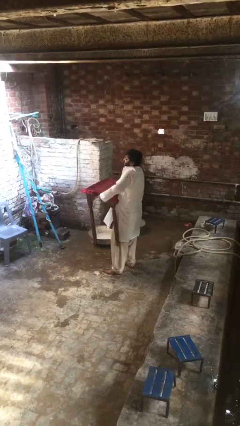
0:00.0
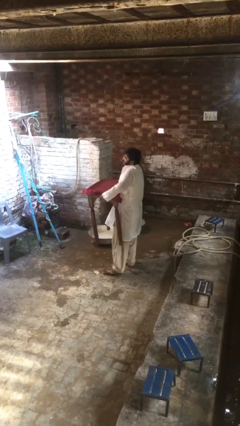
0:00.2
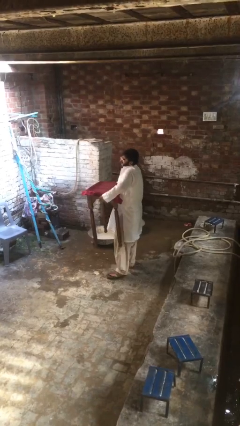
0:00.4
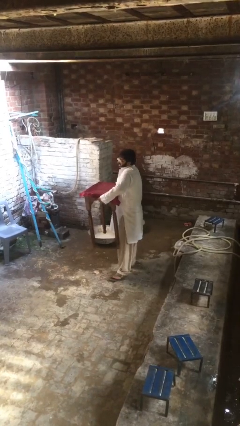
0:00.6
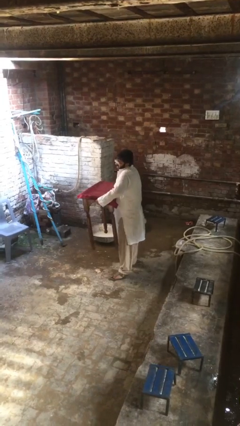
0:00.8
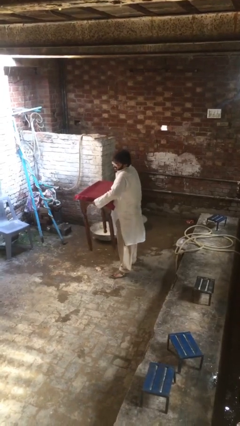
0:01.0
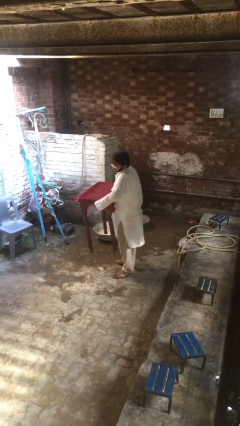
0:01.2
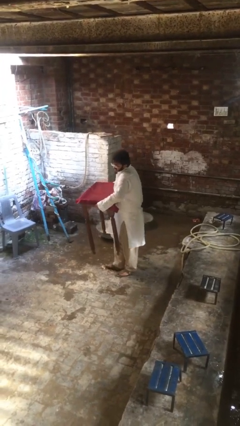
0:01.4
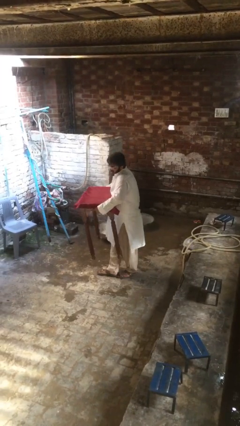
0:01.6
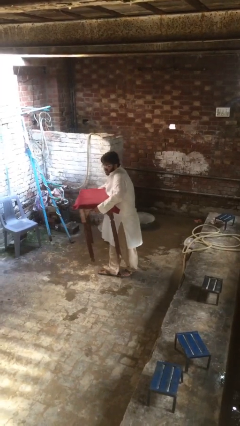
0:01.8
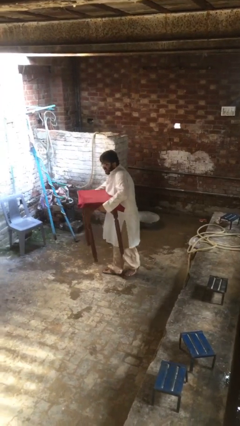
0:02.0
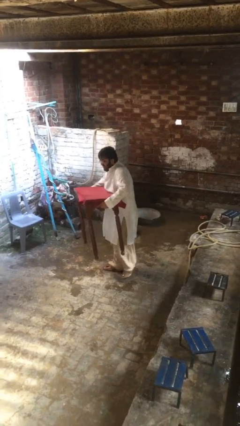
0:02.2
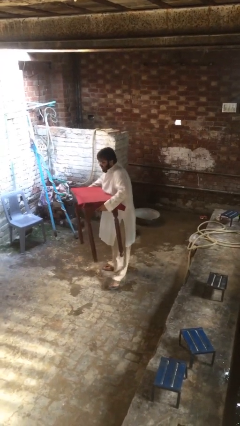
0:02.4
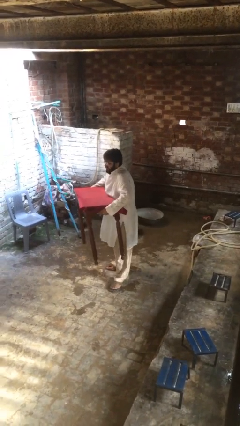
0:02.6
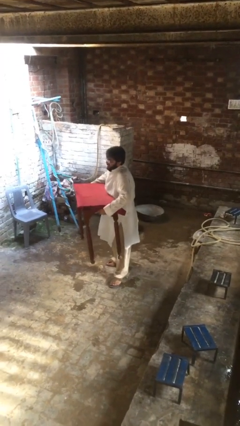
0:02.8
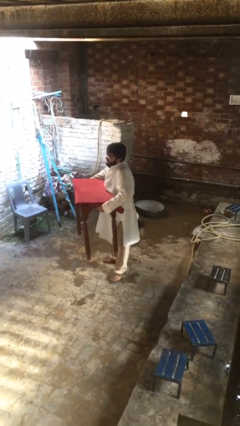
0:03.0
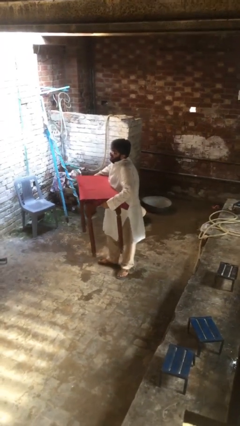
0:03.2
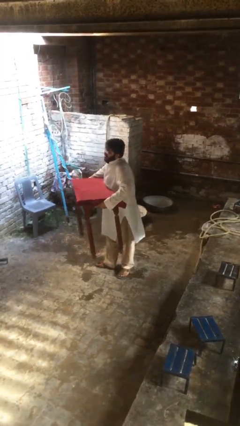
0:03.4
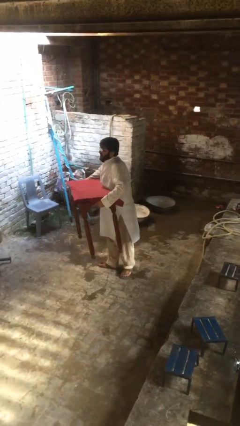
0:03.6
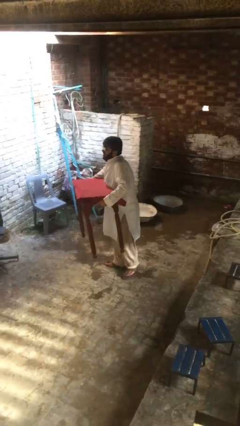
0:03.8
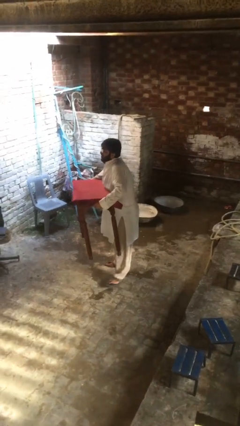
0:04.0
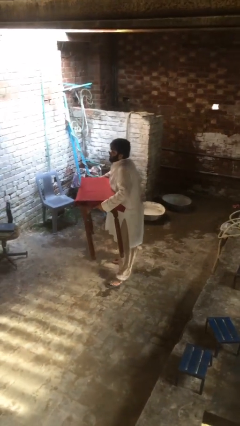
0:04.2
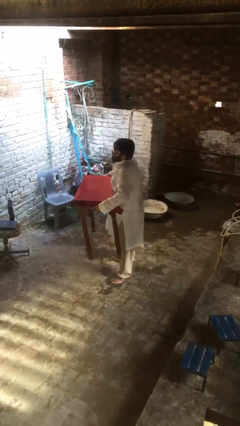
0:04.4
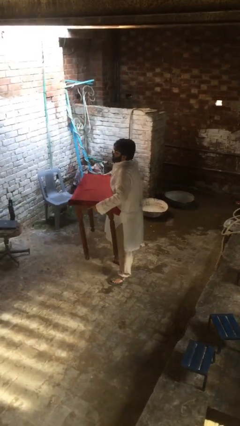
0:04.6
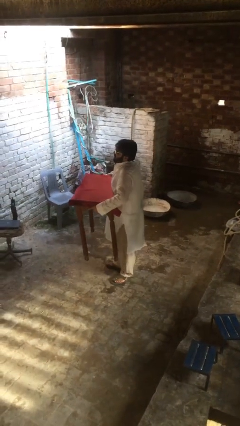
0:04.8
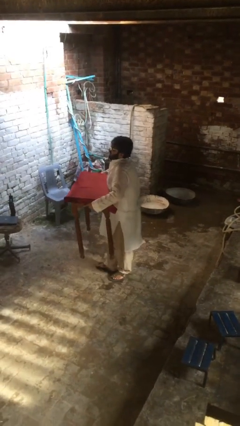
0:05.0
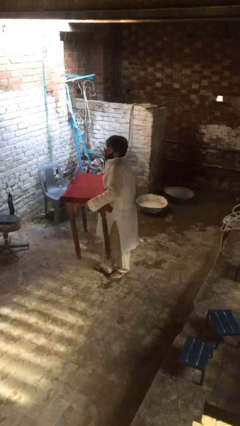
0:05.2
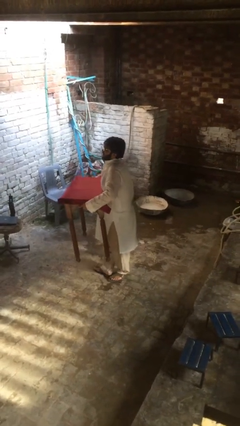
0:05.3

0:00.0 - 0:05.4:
person carries heavy object

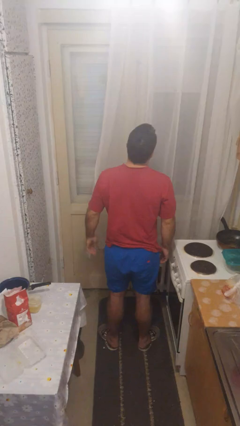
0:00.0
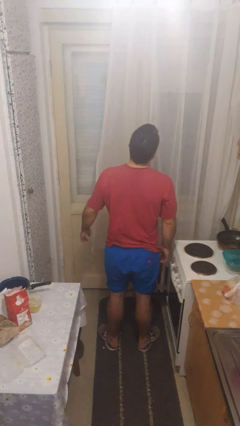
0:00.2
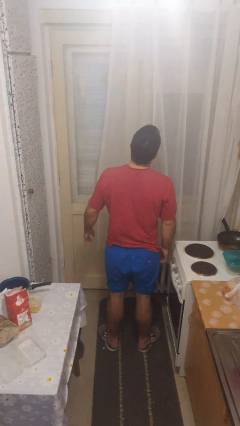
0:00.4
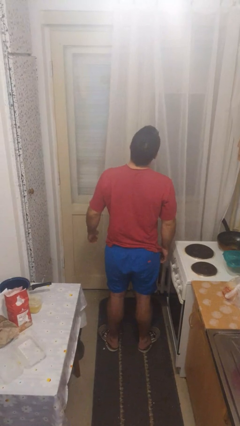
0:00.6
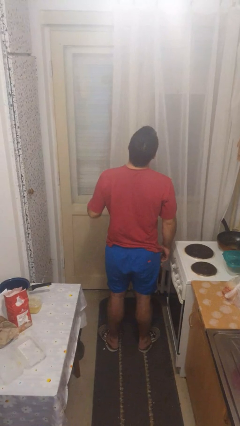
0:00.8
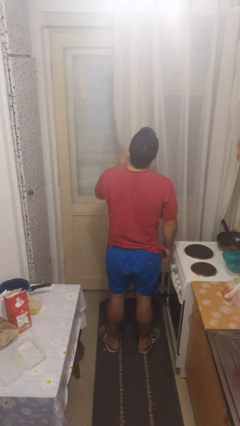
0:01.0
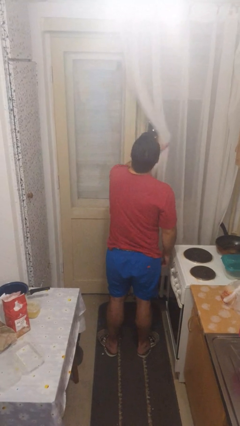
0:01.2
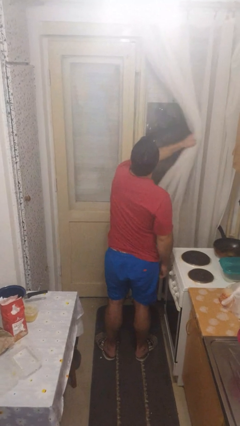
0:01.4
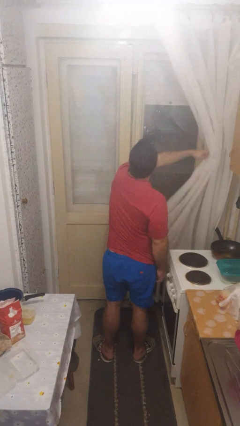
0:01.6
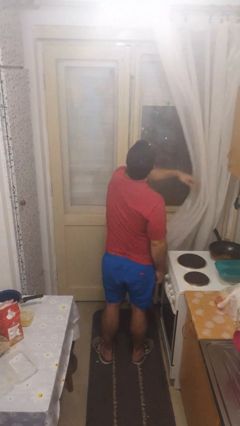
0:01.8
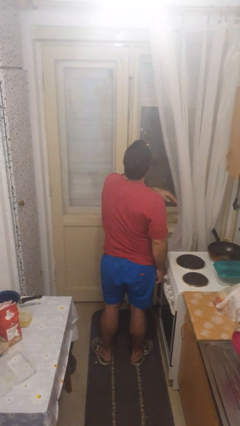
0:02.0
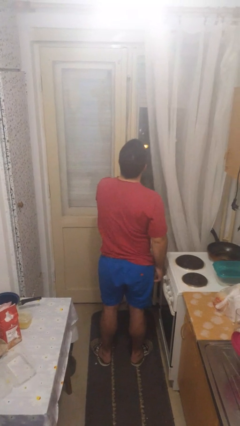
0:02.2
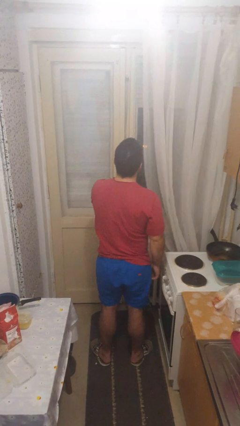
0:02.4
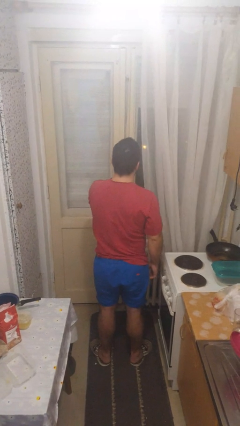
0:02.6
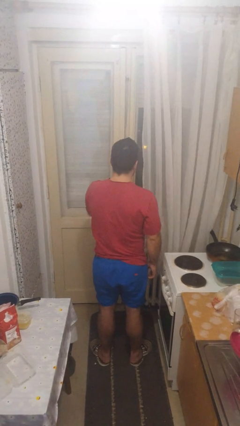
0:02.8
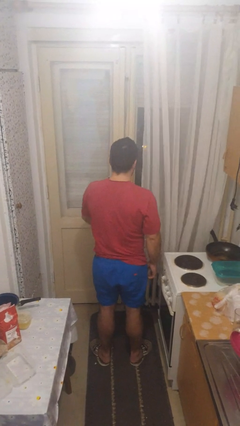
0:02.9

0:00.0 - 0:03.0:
person opens curtains

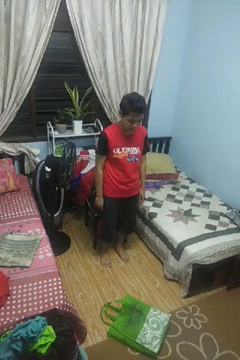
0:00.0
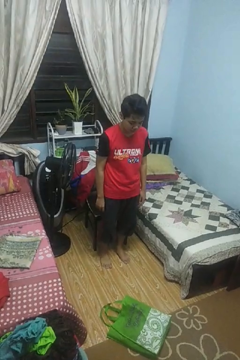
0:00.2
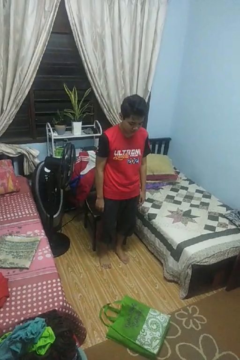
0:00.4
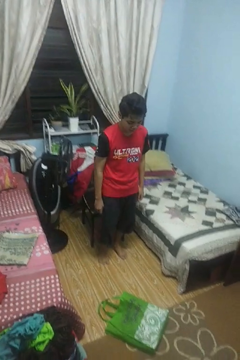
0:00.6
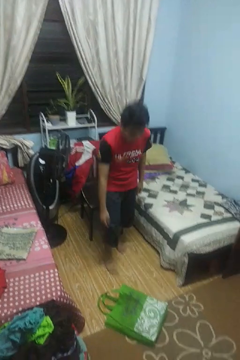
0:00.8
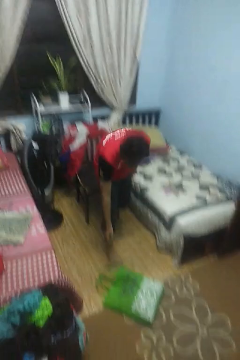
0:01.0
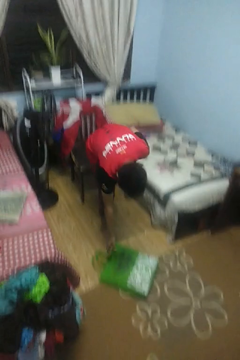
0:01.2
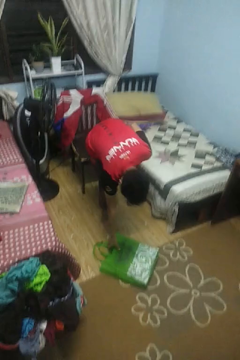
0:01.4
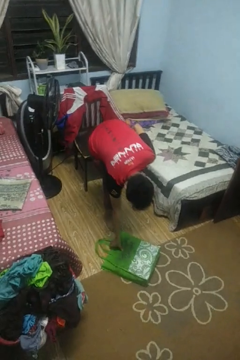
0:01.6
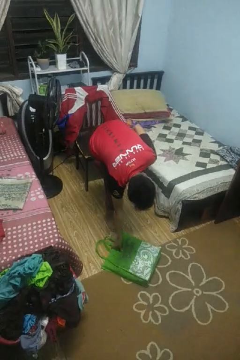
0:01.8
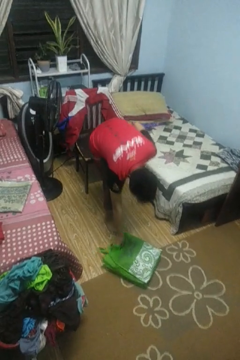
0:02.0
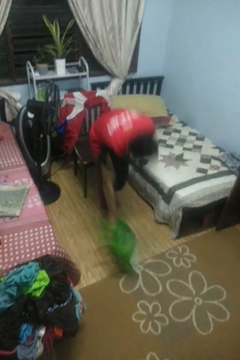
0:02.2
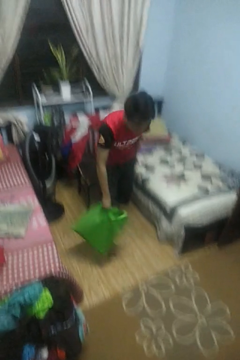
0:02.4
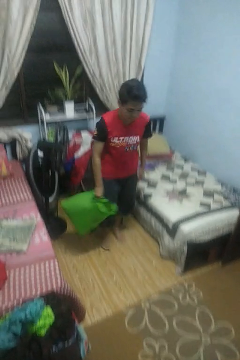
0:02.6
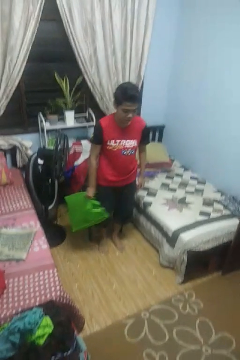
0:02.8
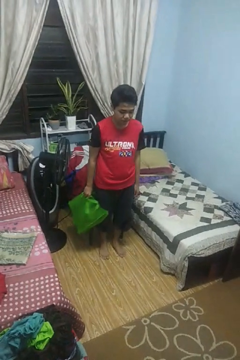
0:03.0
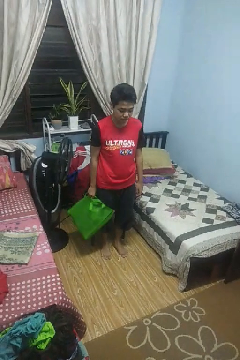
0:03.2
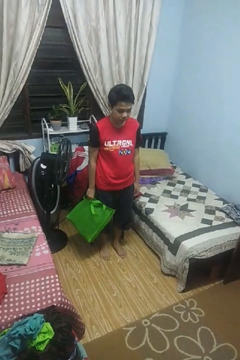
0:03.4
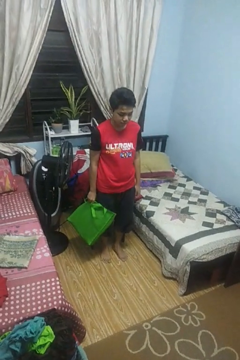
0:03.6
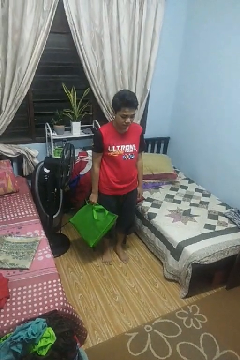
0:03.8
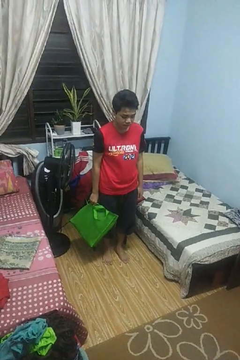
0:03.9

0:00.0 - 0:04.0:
person picks up object from floor

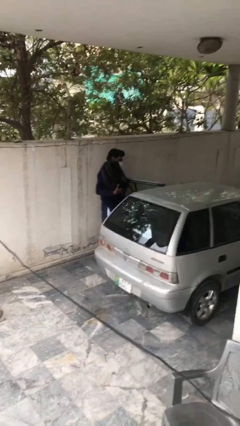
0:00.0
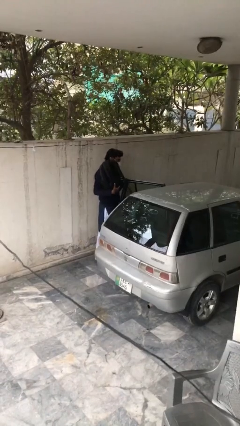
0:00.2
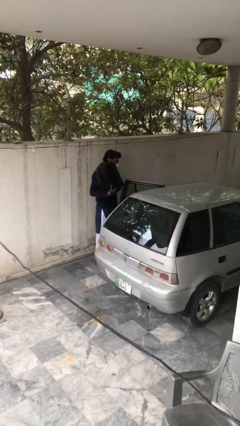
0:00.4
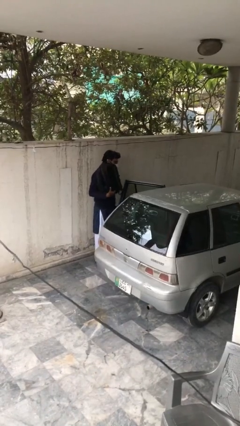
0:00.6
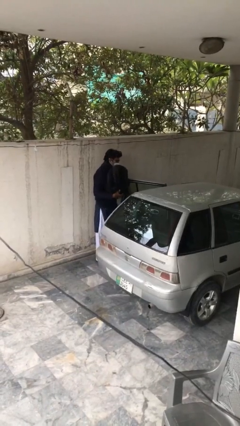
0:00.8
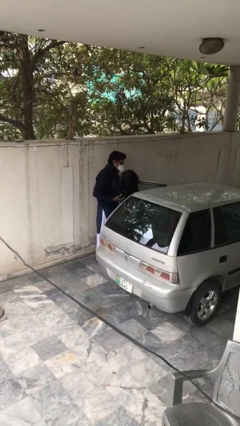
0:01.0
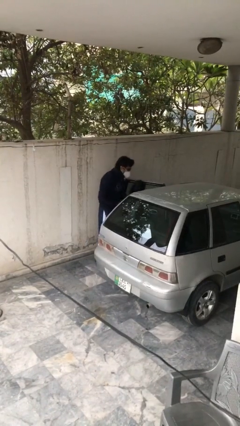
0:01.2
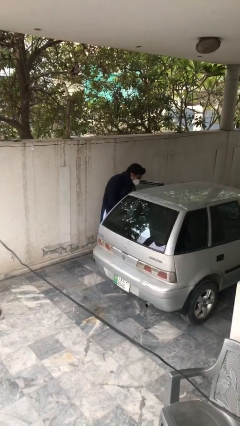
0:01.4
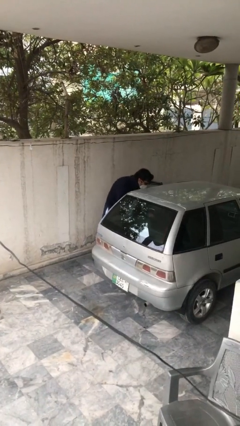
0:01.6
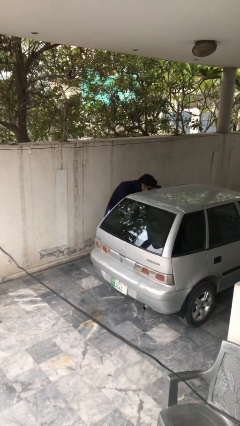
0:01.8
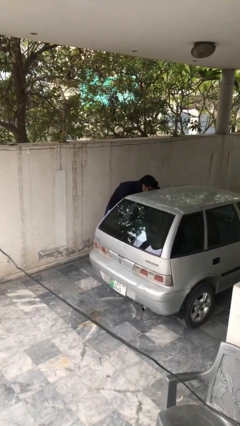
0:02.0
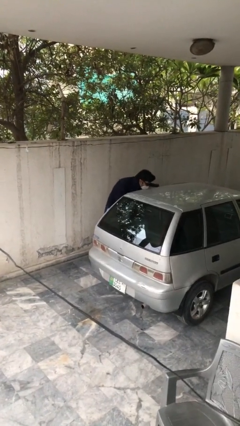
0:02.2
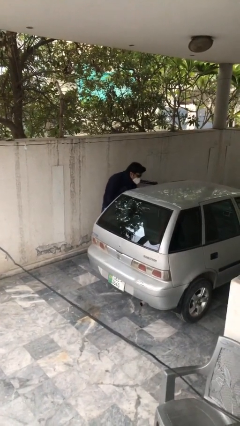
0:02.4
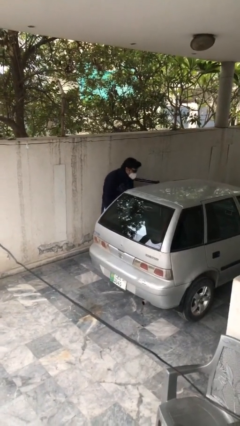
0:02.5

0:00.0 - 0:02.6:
person loads car

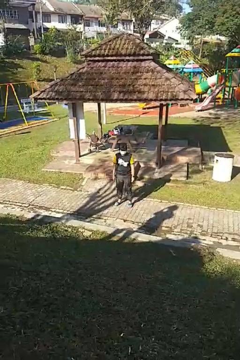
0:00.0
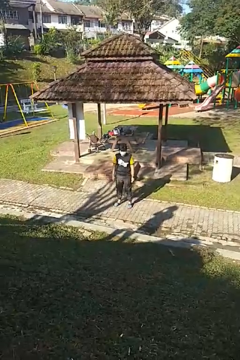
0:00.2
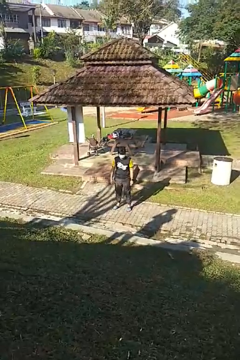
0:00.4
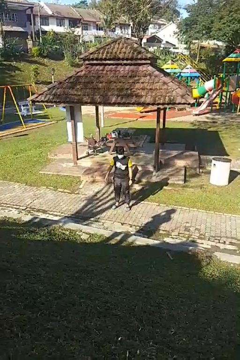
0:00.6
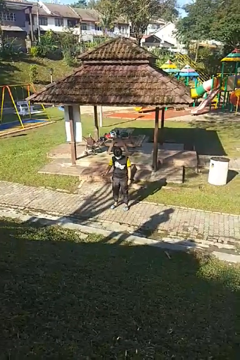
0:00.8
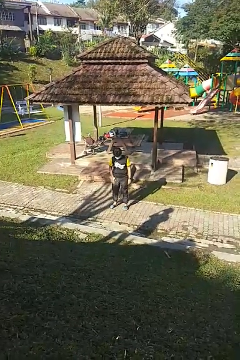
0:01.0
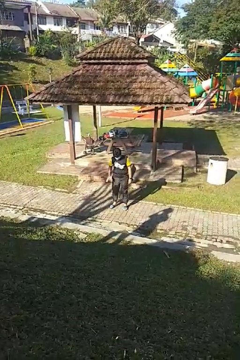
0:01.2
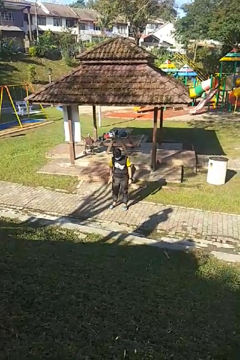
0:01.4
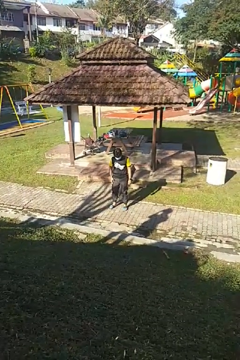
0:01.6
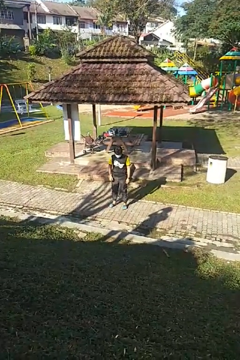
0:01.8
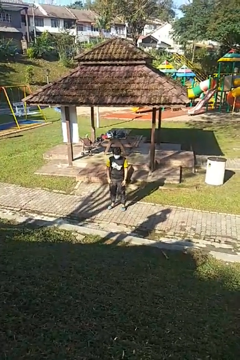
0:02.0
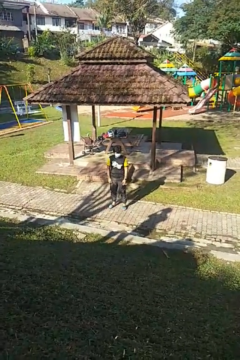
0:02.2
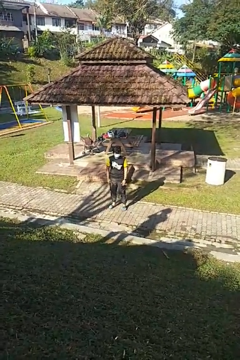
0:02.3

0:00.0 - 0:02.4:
person slaps hands on thighs

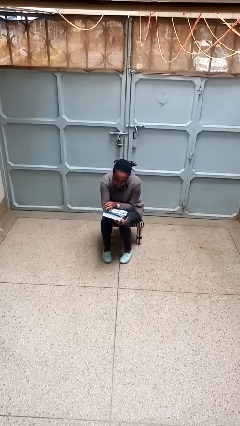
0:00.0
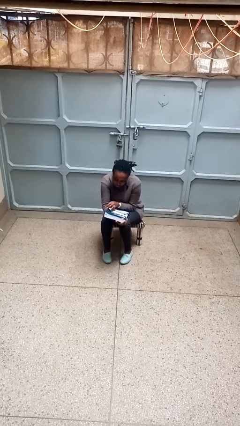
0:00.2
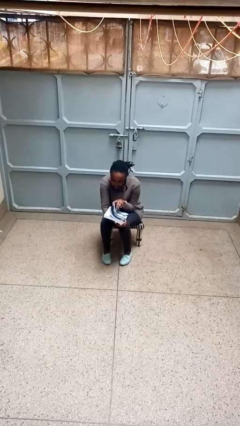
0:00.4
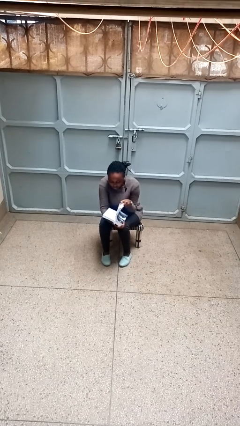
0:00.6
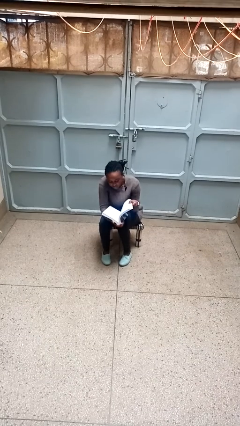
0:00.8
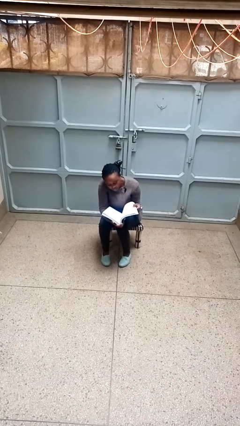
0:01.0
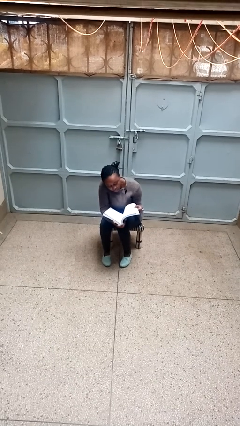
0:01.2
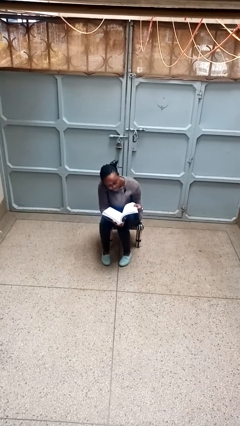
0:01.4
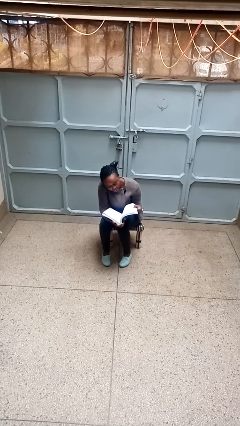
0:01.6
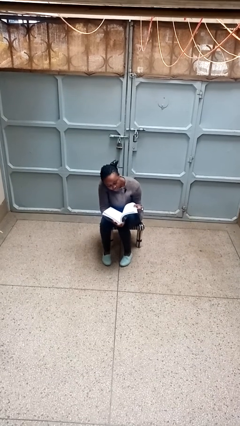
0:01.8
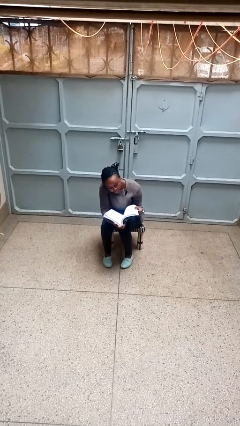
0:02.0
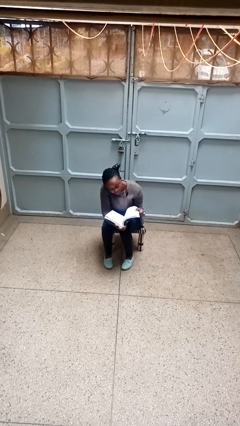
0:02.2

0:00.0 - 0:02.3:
person reads book
